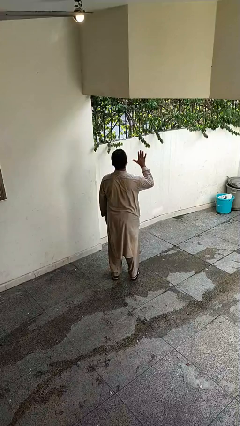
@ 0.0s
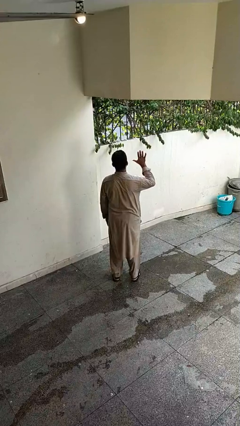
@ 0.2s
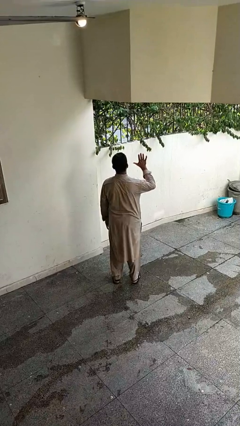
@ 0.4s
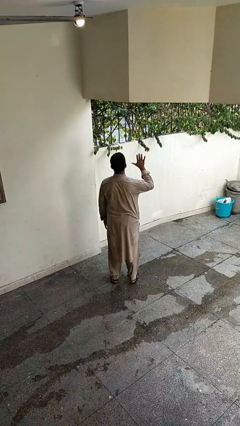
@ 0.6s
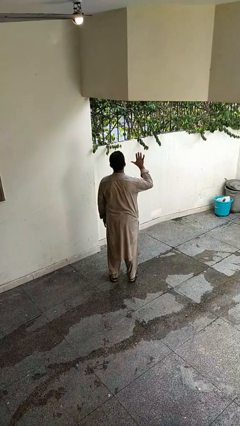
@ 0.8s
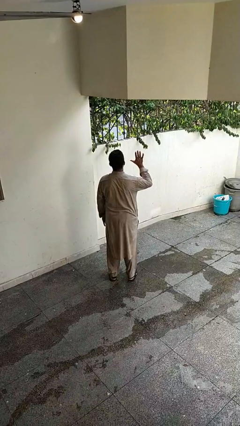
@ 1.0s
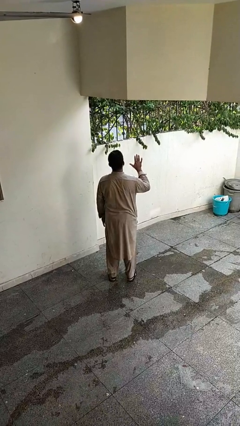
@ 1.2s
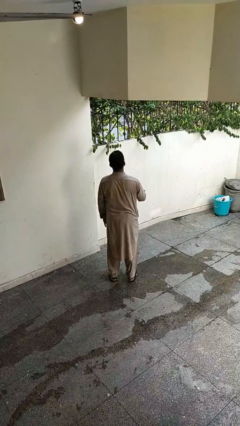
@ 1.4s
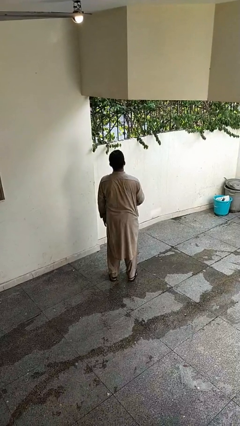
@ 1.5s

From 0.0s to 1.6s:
person gestures number five

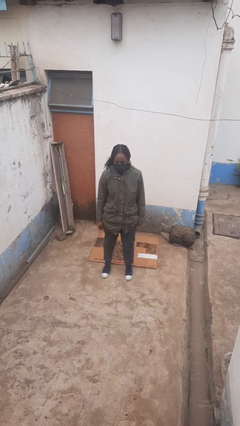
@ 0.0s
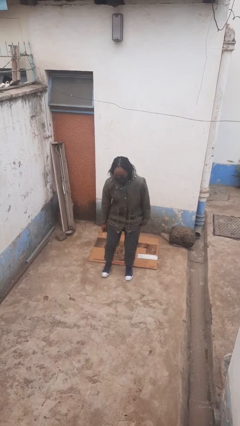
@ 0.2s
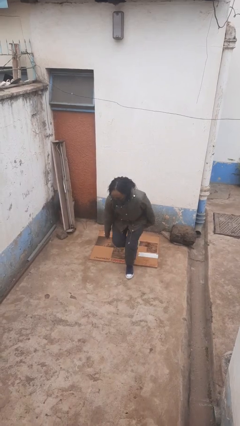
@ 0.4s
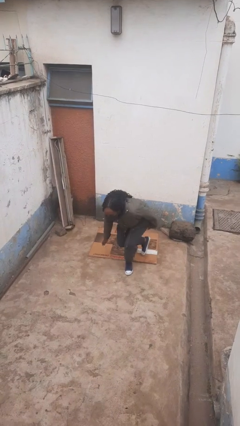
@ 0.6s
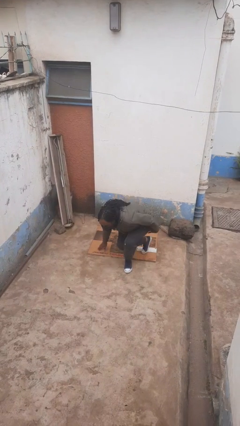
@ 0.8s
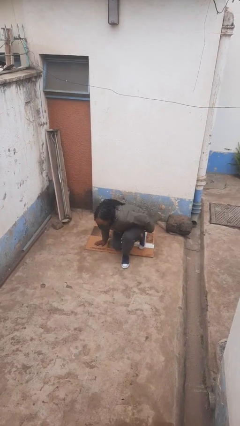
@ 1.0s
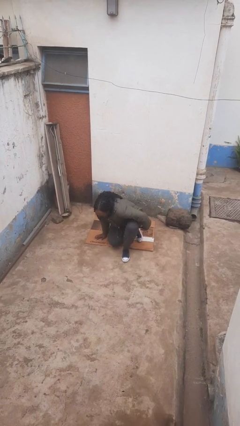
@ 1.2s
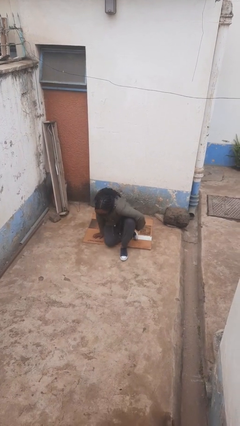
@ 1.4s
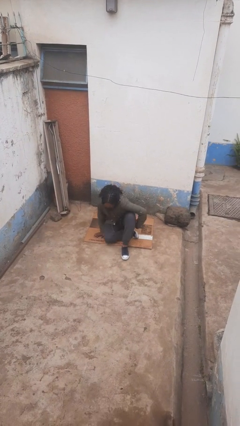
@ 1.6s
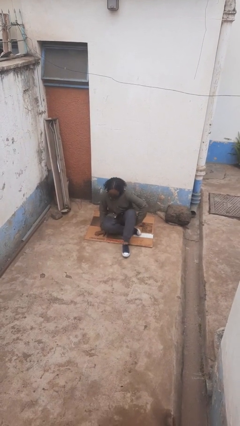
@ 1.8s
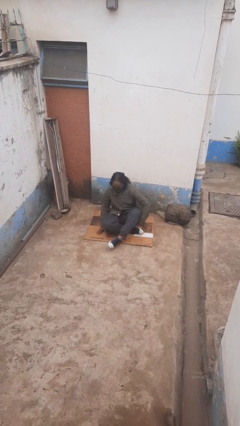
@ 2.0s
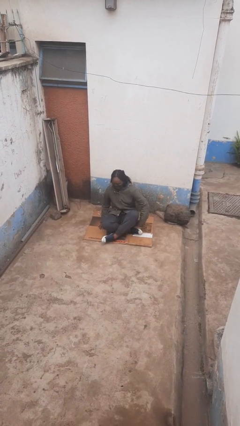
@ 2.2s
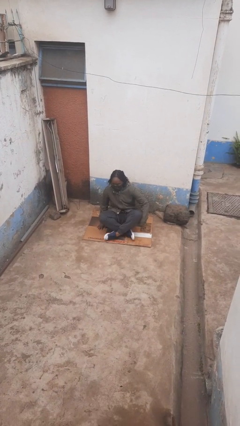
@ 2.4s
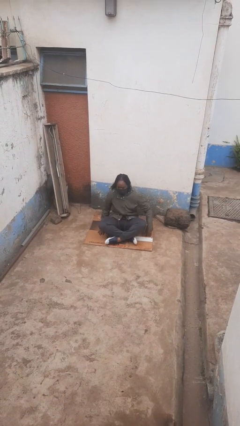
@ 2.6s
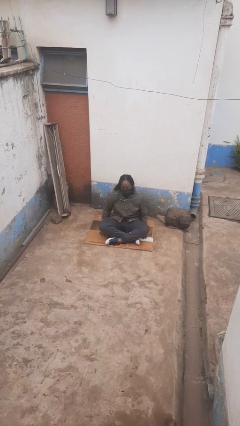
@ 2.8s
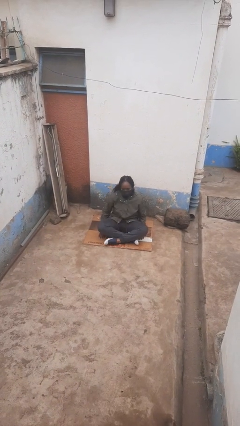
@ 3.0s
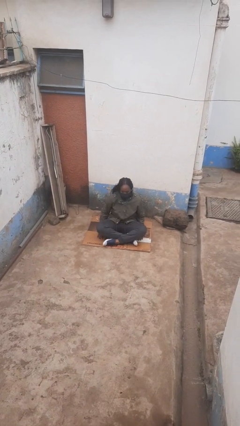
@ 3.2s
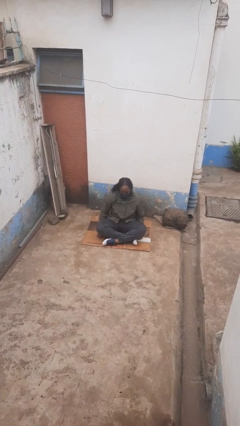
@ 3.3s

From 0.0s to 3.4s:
person sits crisscross

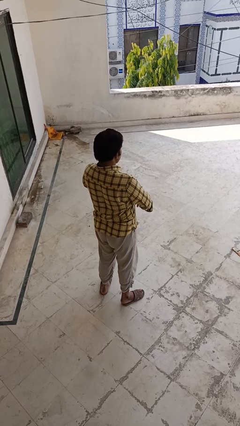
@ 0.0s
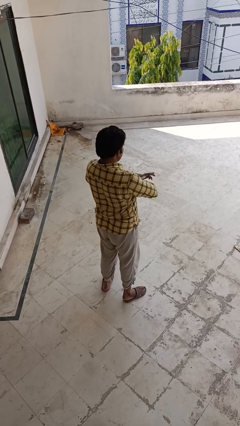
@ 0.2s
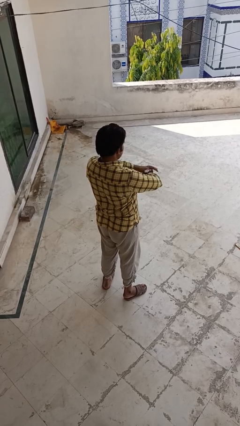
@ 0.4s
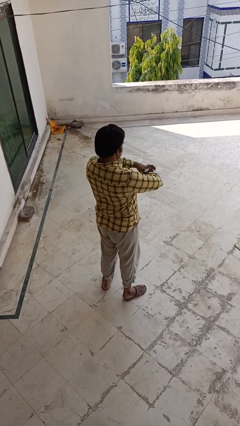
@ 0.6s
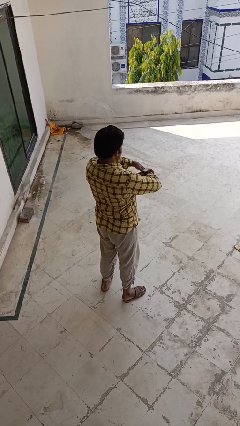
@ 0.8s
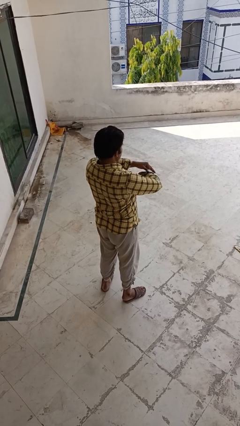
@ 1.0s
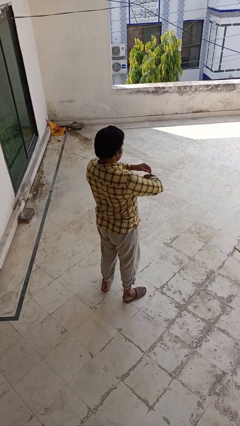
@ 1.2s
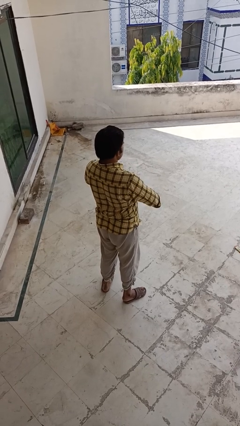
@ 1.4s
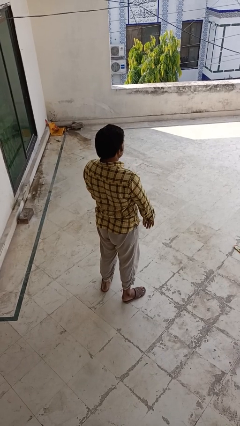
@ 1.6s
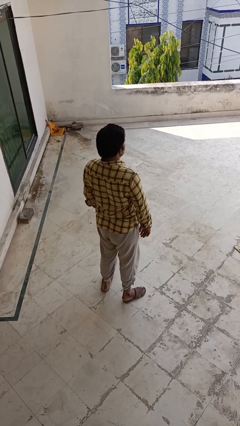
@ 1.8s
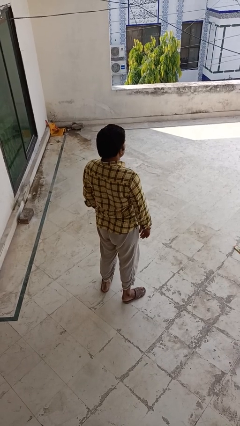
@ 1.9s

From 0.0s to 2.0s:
person puts on wristwatch

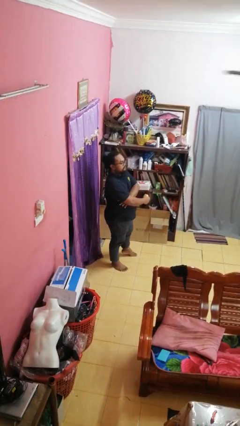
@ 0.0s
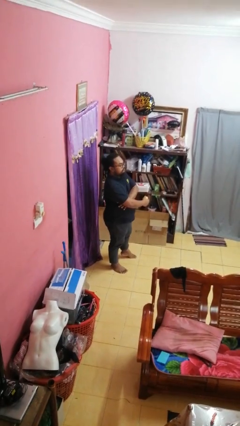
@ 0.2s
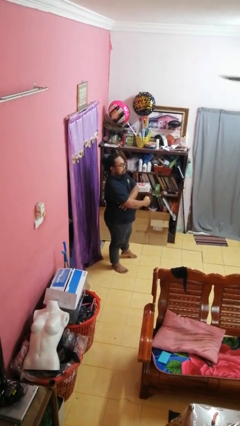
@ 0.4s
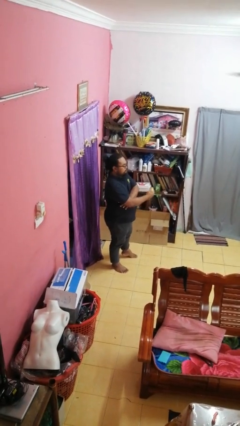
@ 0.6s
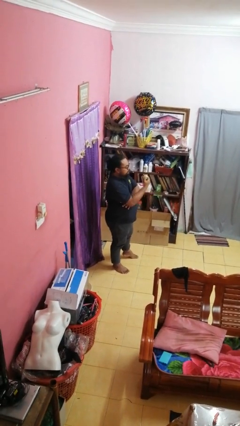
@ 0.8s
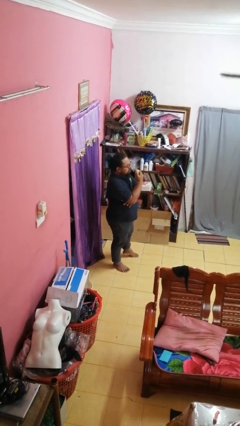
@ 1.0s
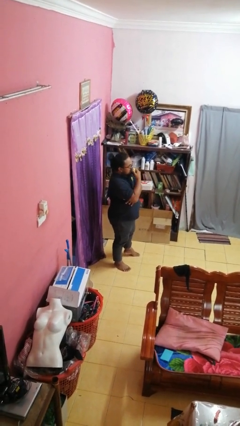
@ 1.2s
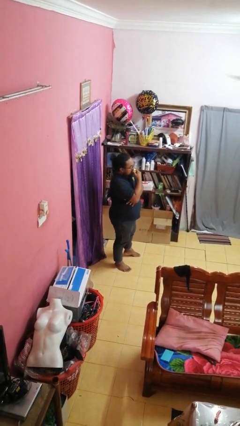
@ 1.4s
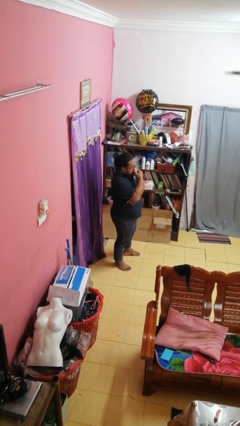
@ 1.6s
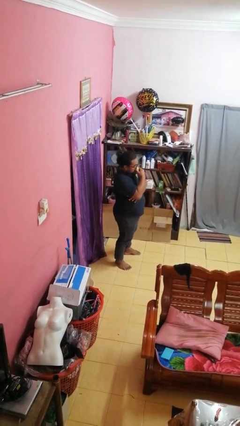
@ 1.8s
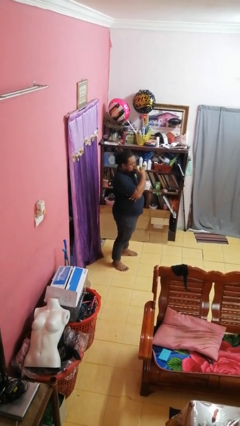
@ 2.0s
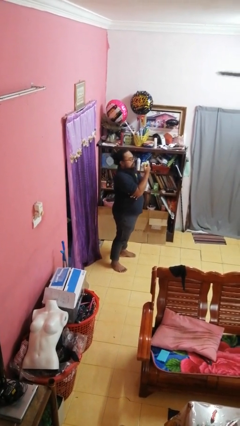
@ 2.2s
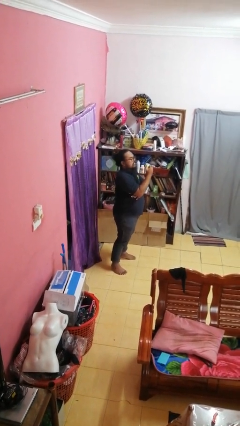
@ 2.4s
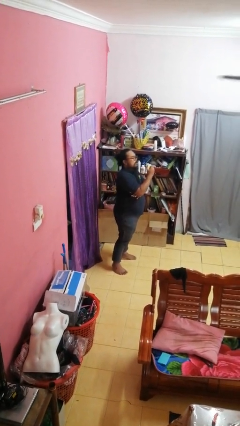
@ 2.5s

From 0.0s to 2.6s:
person eats apple

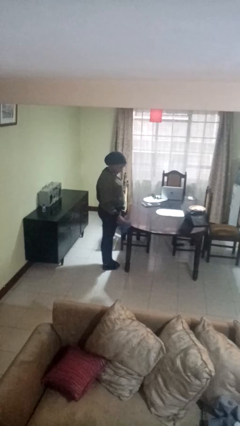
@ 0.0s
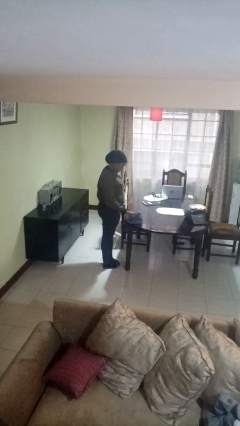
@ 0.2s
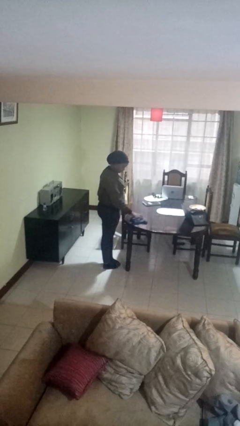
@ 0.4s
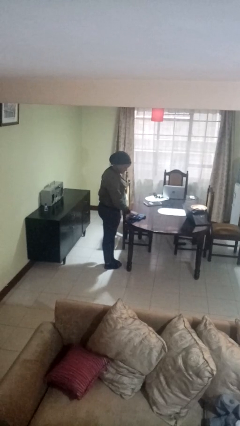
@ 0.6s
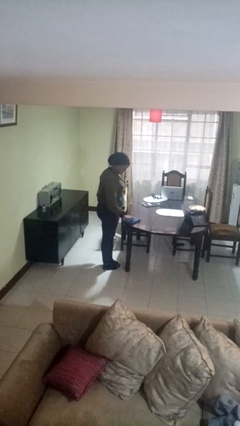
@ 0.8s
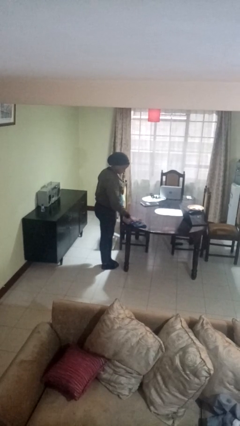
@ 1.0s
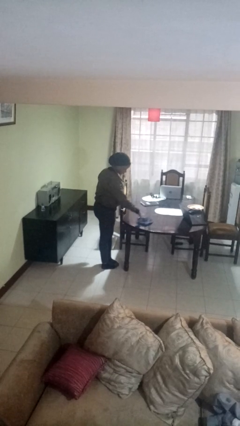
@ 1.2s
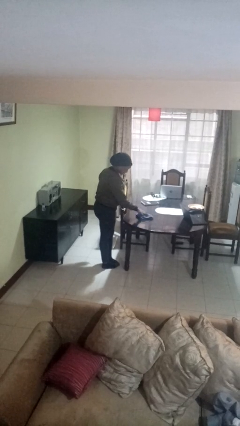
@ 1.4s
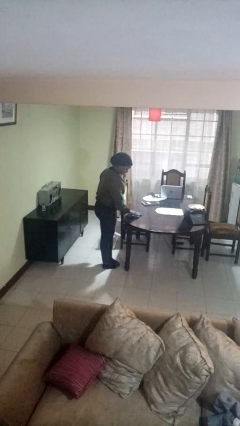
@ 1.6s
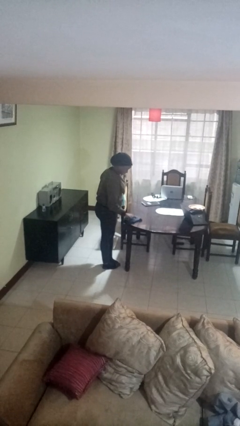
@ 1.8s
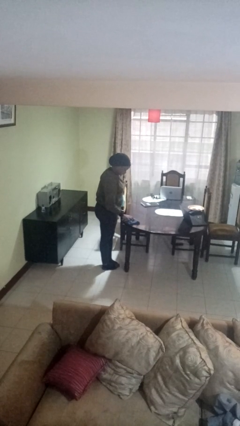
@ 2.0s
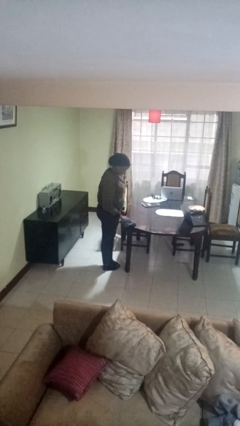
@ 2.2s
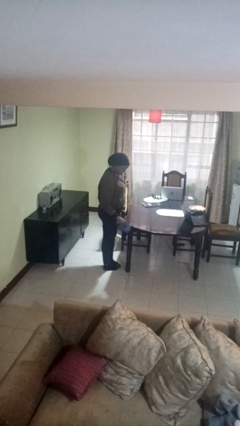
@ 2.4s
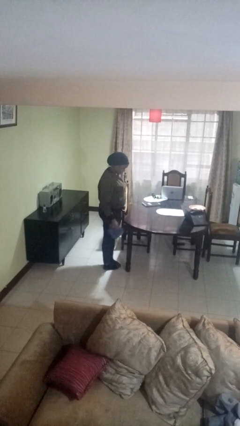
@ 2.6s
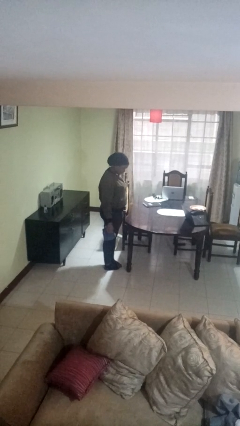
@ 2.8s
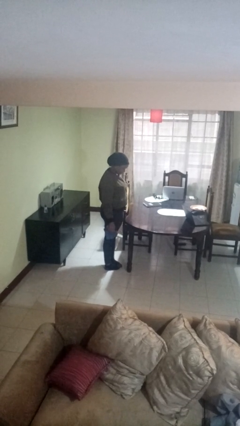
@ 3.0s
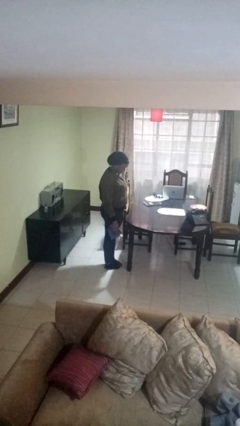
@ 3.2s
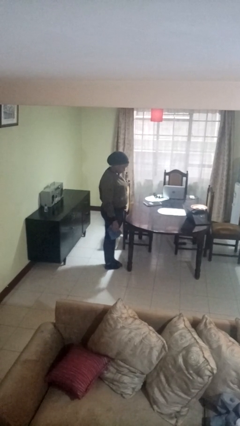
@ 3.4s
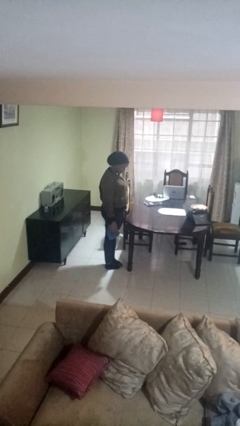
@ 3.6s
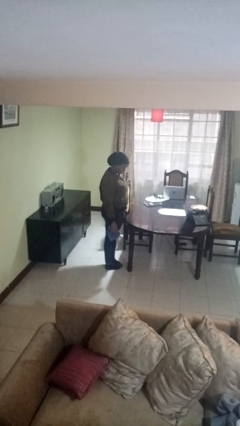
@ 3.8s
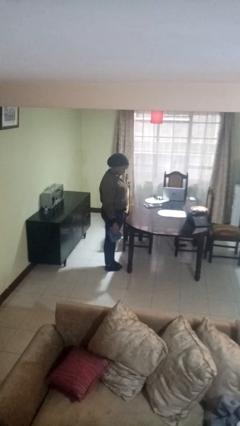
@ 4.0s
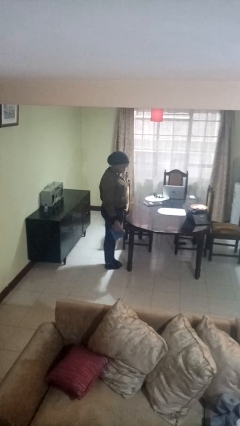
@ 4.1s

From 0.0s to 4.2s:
person cleans table with rag

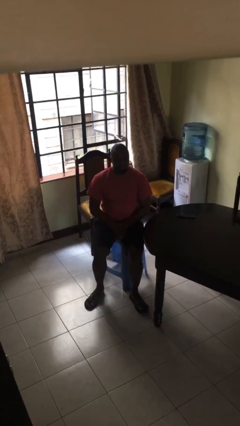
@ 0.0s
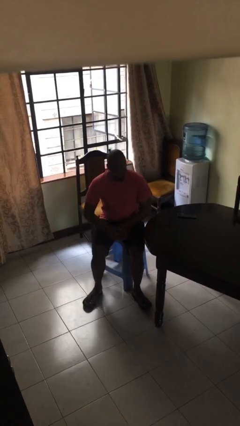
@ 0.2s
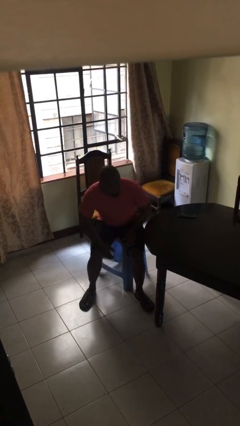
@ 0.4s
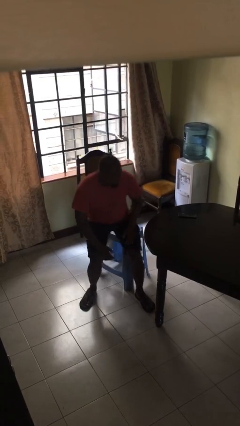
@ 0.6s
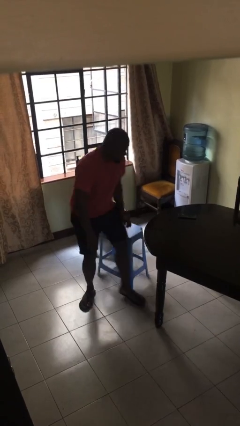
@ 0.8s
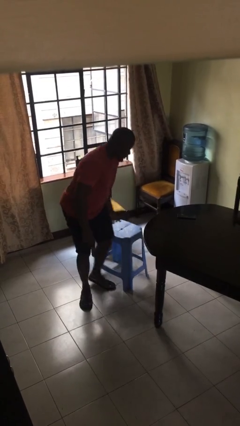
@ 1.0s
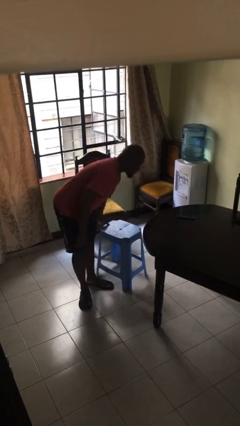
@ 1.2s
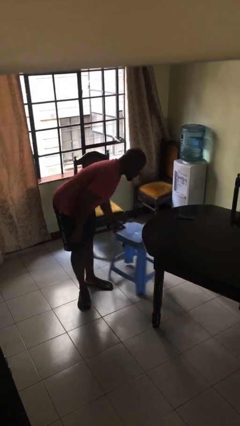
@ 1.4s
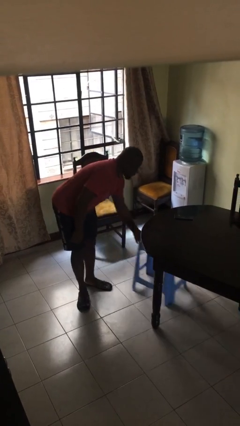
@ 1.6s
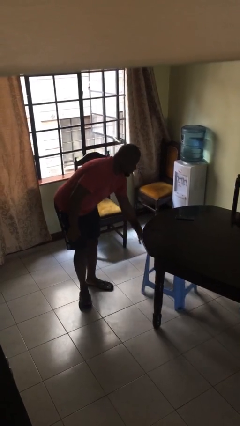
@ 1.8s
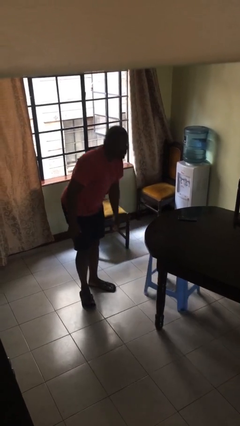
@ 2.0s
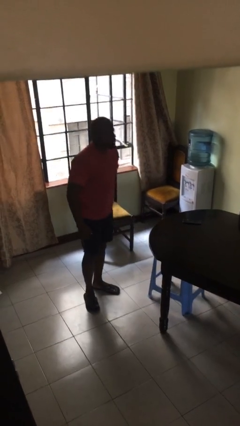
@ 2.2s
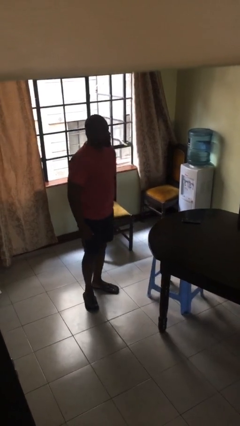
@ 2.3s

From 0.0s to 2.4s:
person stands up

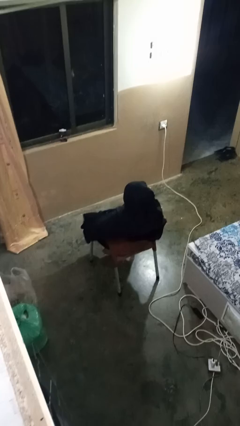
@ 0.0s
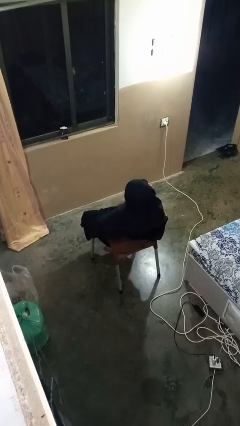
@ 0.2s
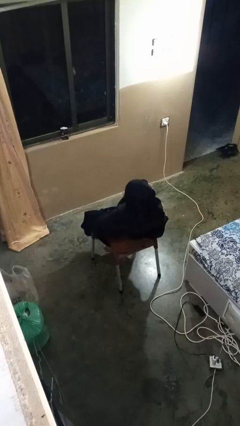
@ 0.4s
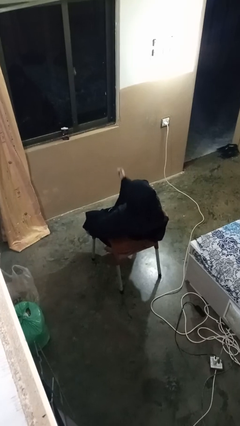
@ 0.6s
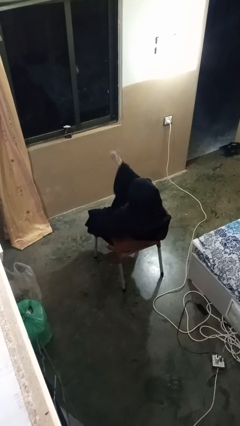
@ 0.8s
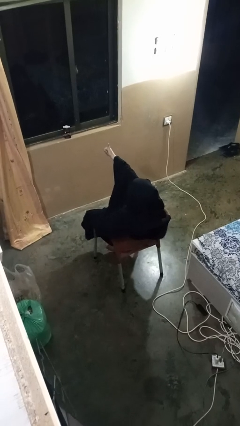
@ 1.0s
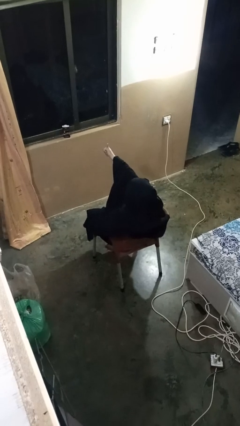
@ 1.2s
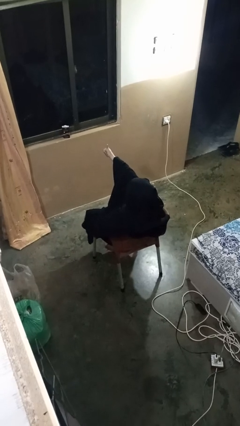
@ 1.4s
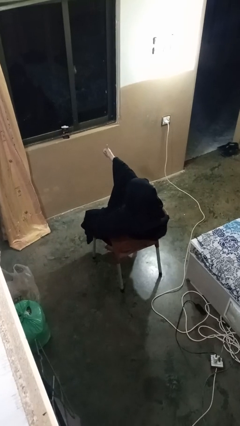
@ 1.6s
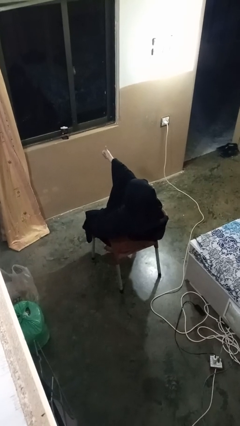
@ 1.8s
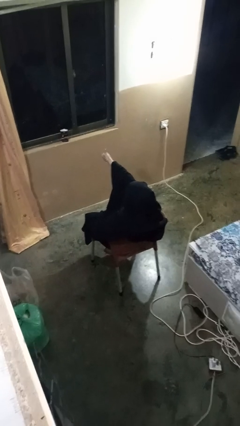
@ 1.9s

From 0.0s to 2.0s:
person gestures thumbs up
